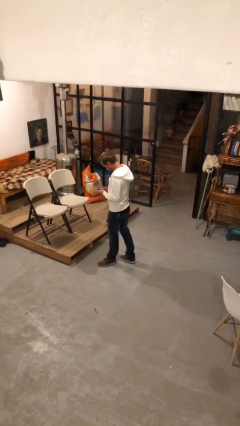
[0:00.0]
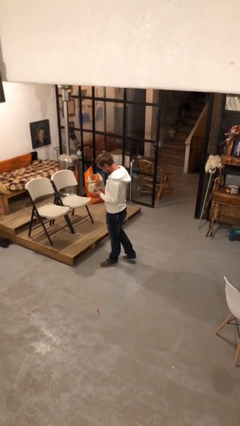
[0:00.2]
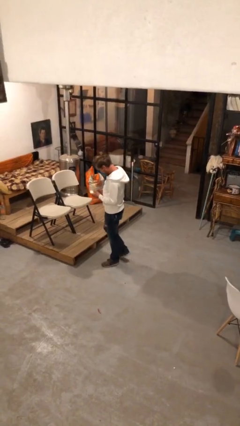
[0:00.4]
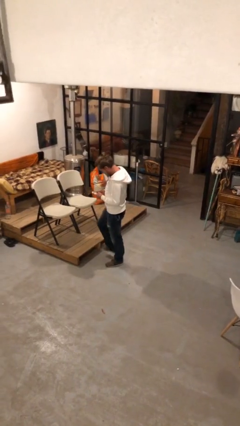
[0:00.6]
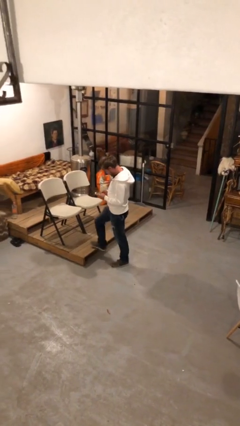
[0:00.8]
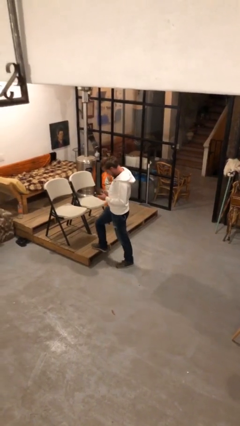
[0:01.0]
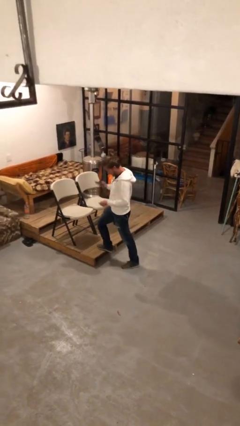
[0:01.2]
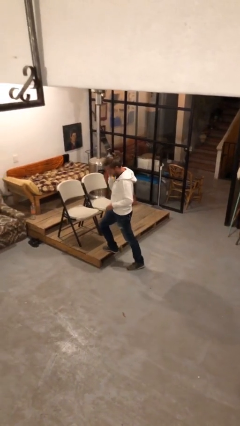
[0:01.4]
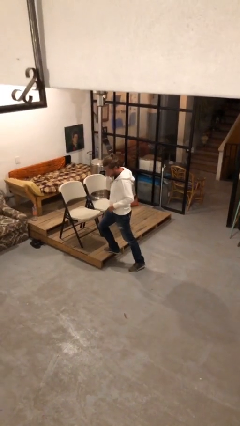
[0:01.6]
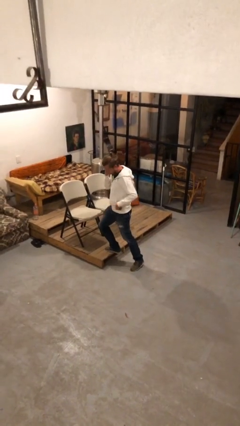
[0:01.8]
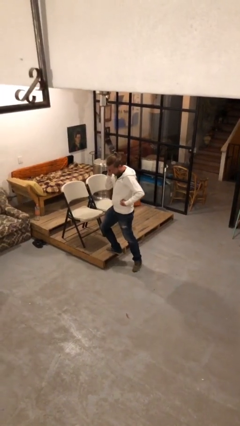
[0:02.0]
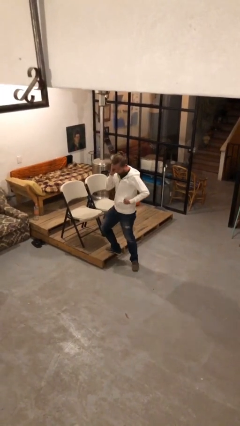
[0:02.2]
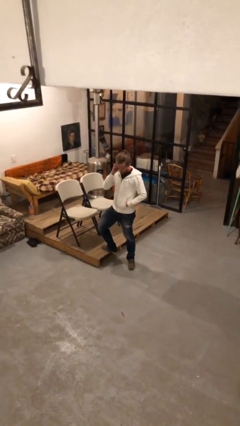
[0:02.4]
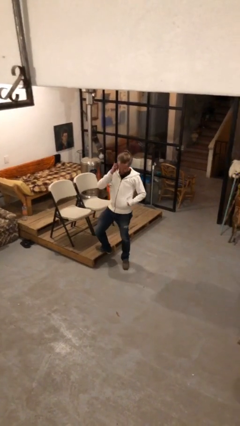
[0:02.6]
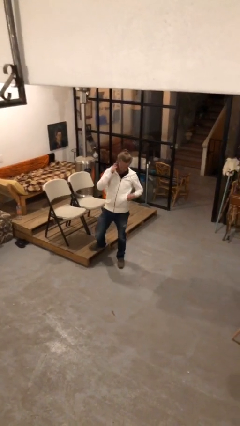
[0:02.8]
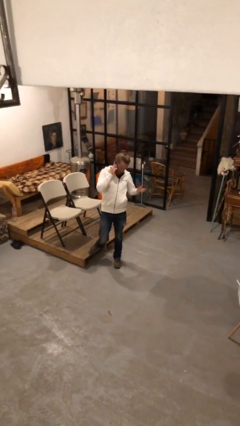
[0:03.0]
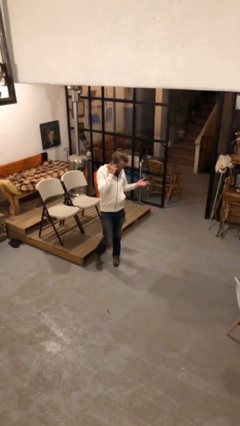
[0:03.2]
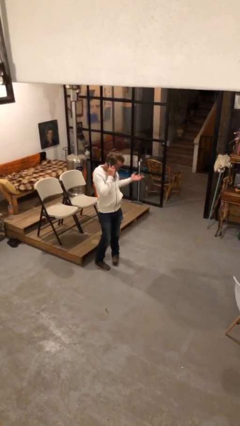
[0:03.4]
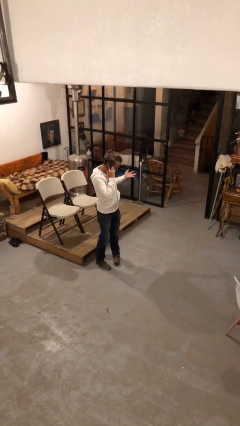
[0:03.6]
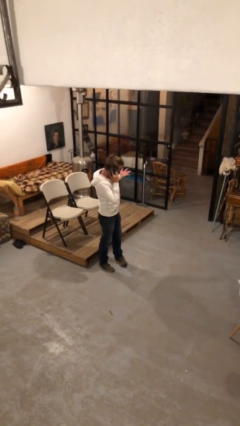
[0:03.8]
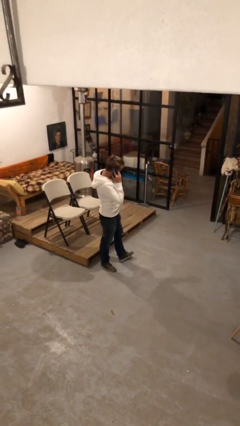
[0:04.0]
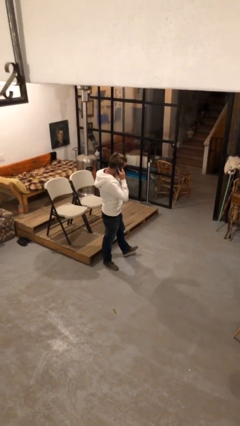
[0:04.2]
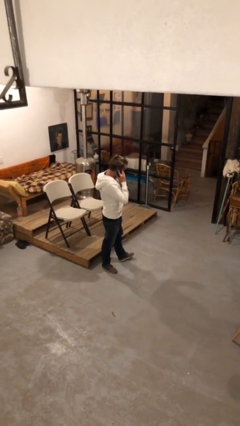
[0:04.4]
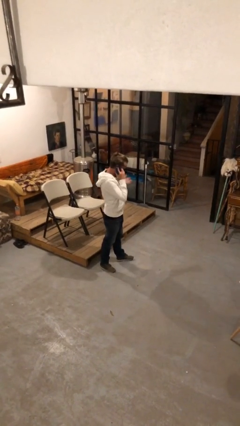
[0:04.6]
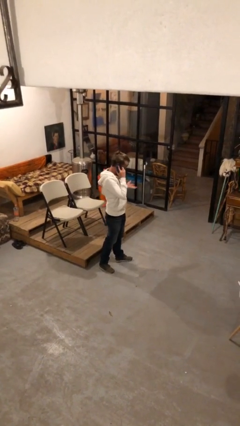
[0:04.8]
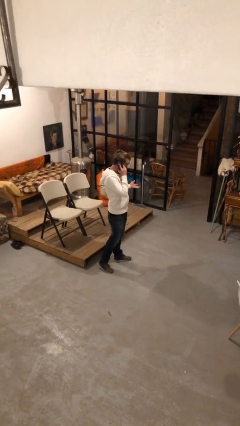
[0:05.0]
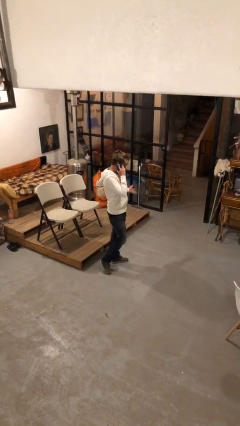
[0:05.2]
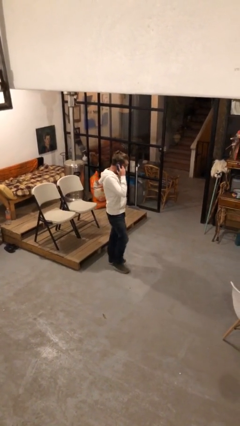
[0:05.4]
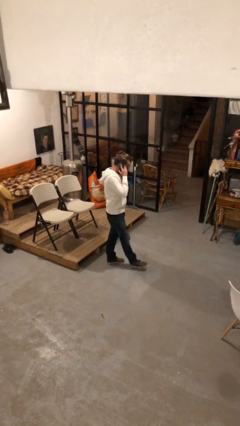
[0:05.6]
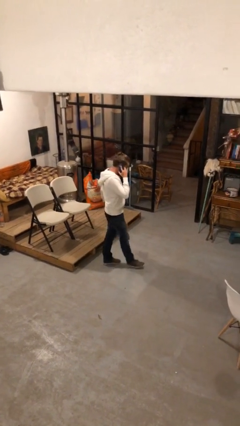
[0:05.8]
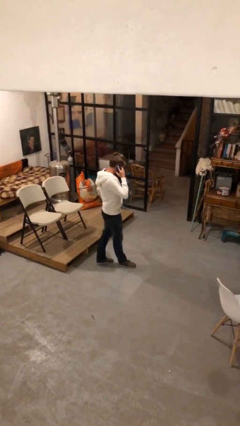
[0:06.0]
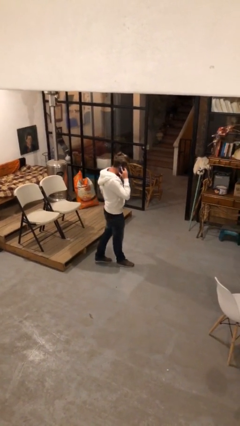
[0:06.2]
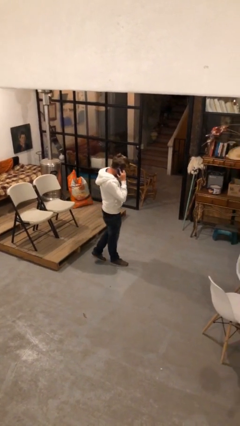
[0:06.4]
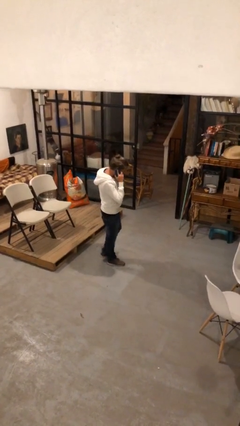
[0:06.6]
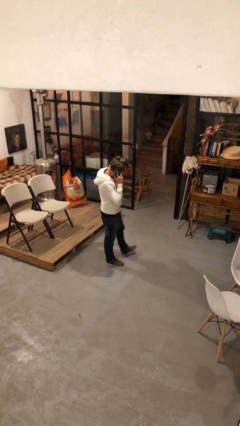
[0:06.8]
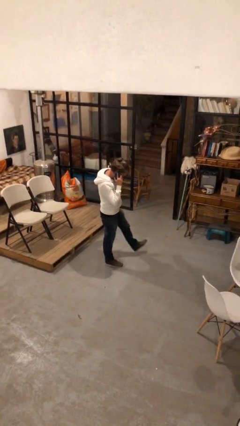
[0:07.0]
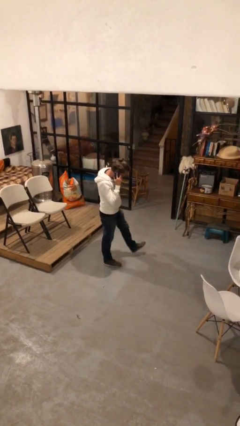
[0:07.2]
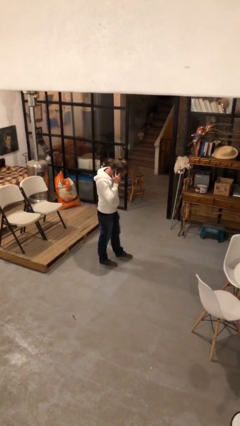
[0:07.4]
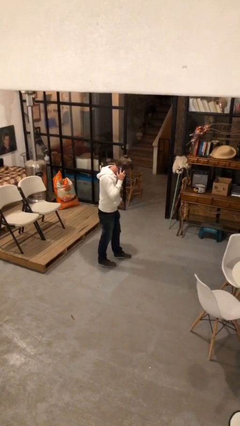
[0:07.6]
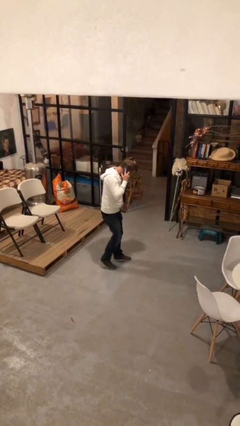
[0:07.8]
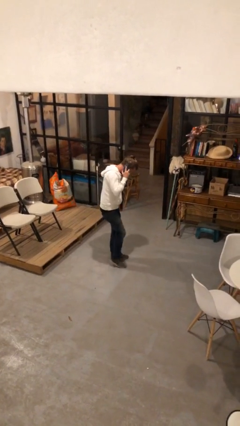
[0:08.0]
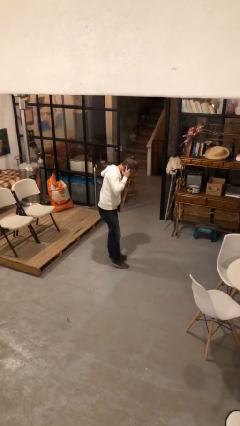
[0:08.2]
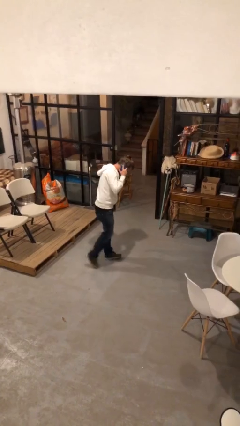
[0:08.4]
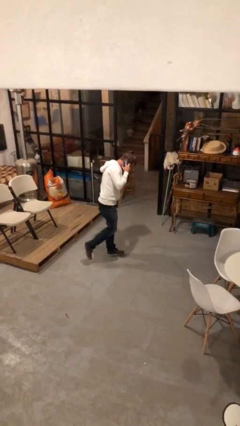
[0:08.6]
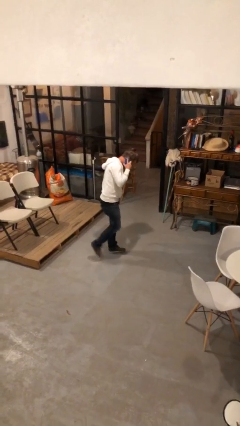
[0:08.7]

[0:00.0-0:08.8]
person talks on phone

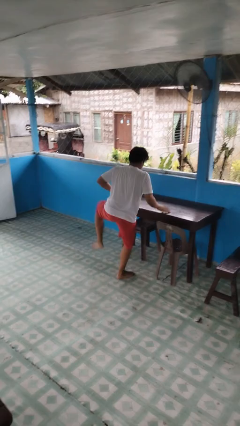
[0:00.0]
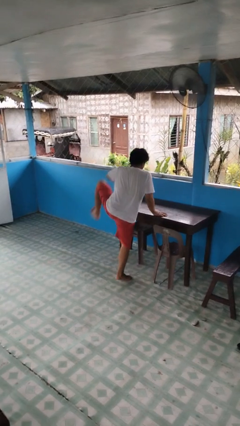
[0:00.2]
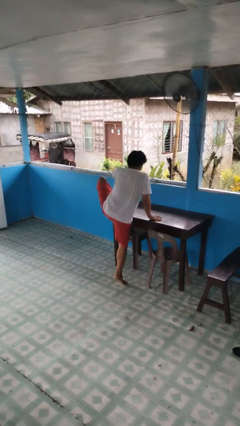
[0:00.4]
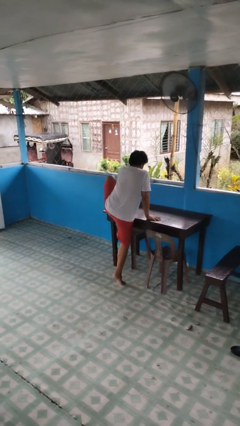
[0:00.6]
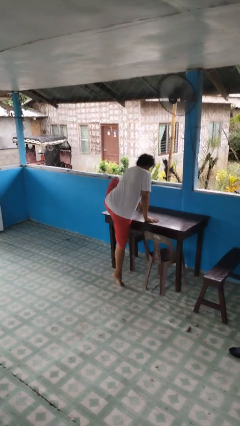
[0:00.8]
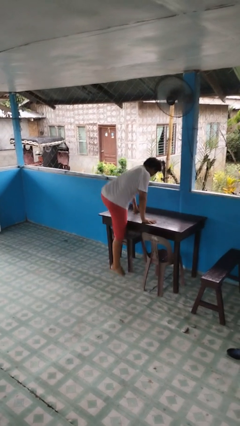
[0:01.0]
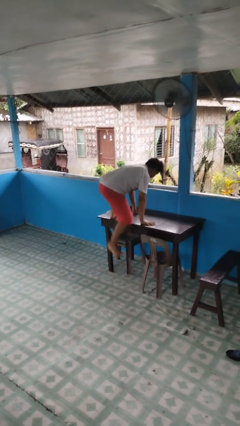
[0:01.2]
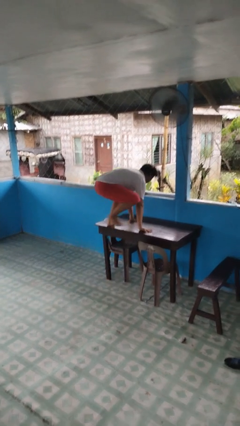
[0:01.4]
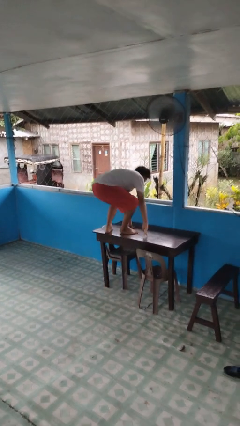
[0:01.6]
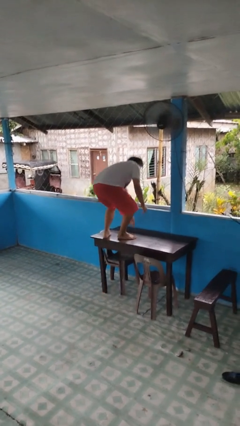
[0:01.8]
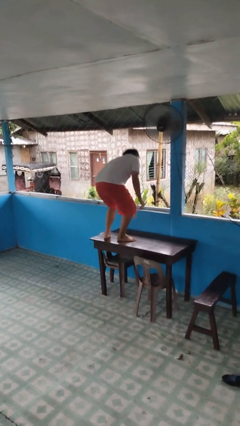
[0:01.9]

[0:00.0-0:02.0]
person climbs on table

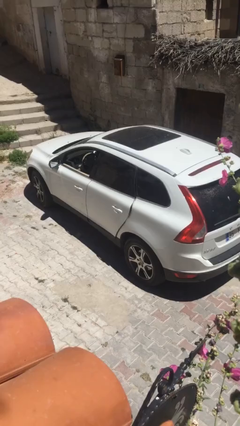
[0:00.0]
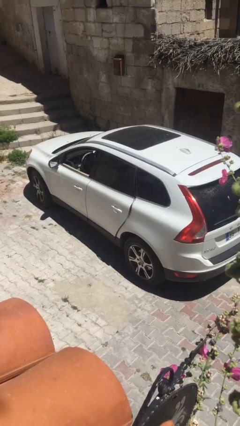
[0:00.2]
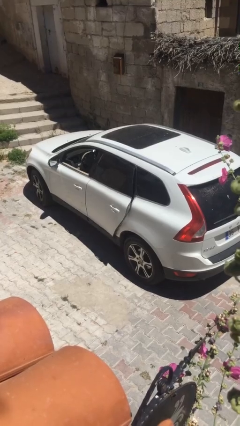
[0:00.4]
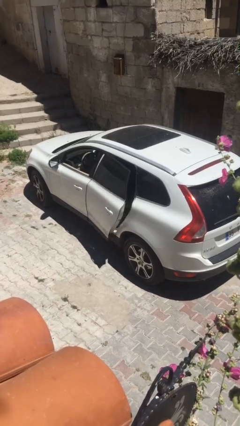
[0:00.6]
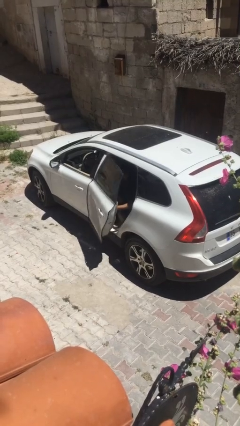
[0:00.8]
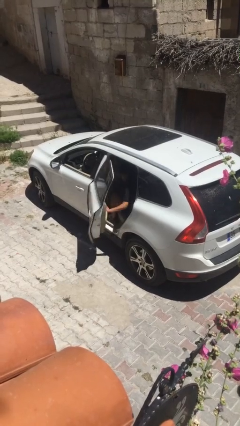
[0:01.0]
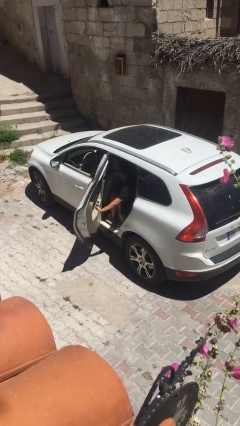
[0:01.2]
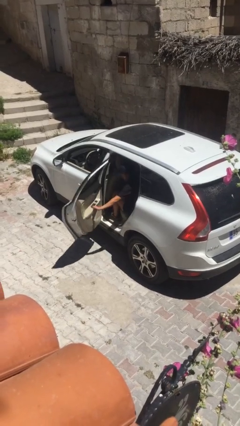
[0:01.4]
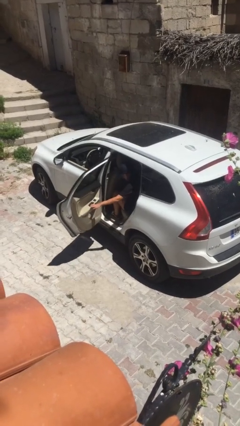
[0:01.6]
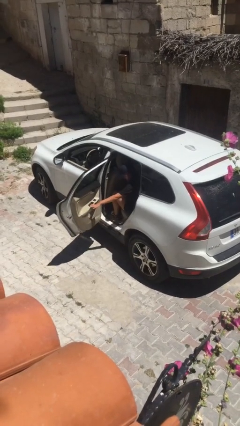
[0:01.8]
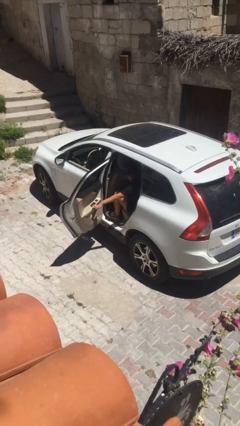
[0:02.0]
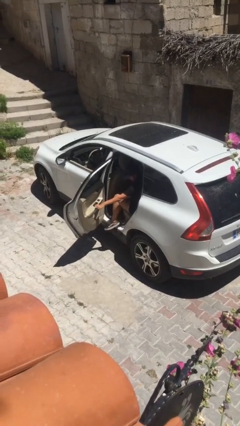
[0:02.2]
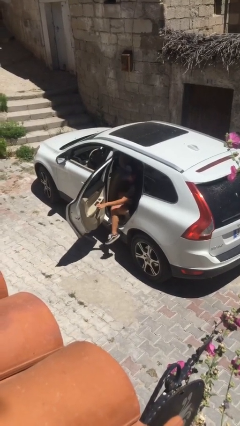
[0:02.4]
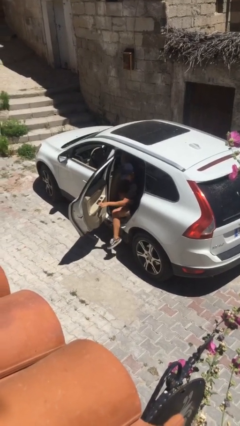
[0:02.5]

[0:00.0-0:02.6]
person opens car door

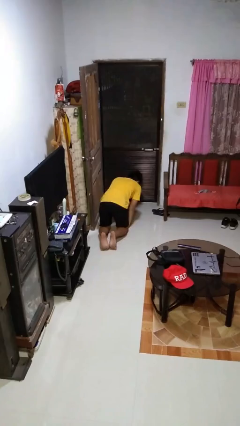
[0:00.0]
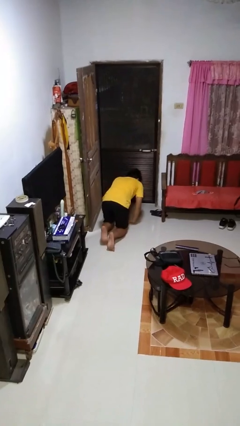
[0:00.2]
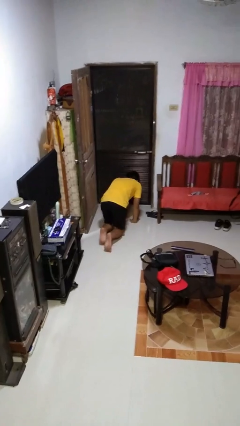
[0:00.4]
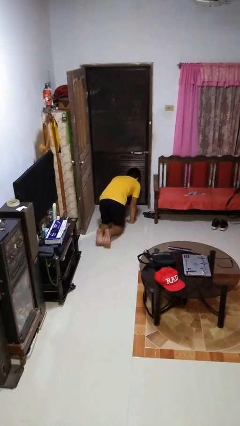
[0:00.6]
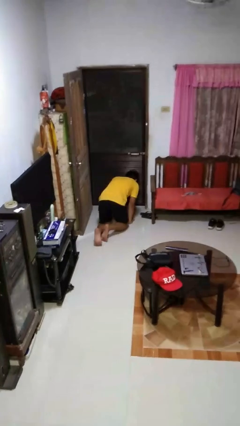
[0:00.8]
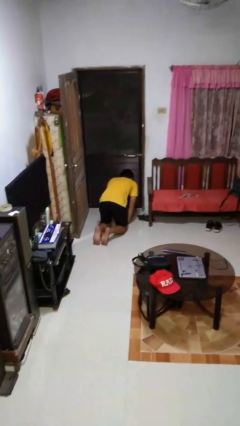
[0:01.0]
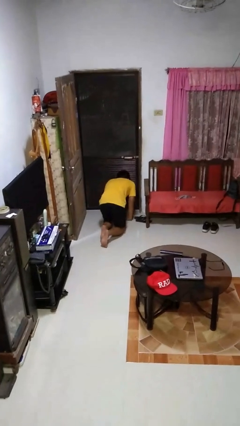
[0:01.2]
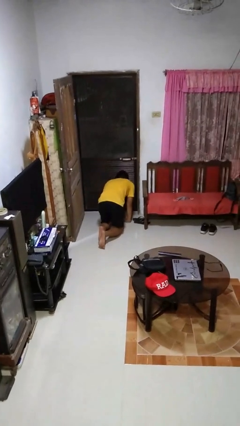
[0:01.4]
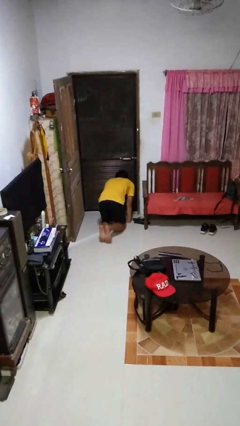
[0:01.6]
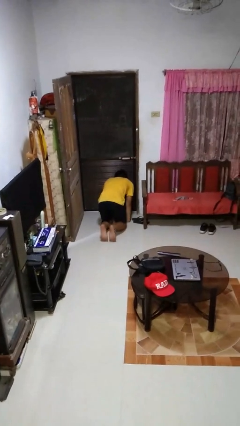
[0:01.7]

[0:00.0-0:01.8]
person crawls

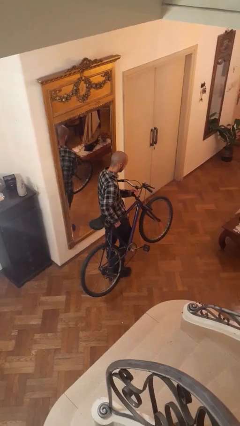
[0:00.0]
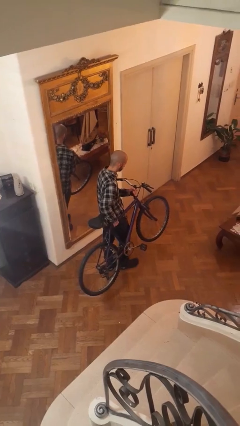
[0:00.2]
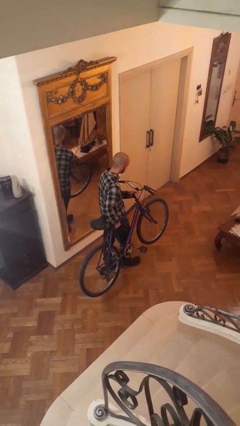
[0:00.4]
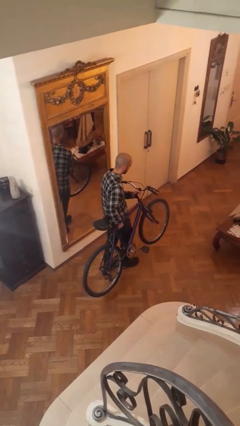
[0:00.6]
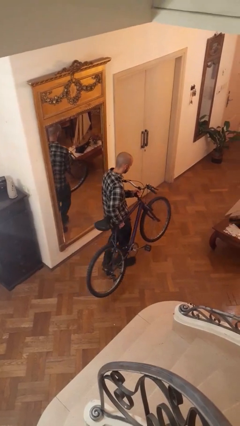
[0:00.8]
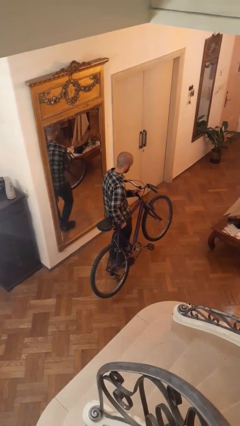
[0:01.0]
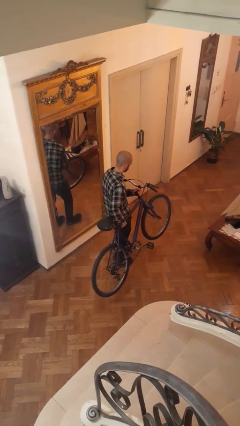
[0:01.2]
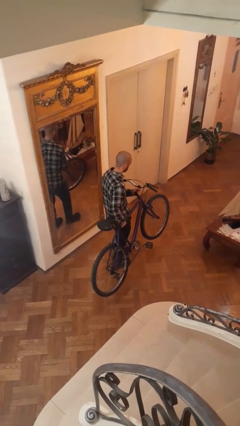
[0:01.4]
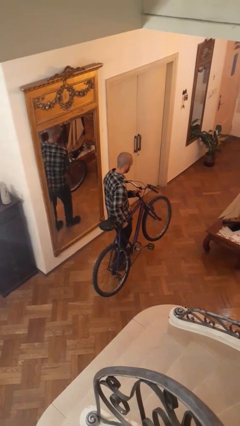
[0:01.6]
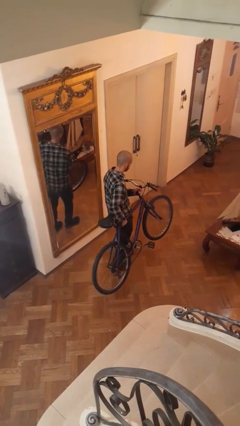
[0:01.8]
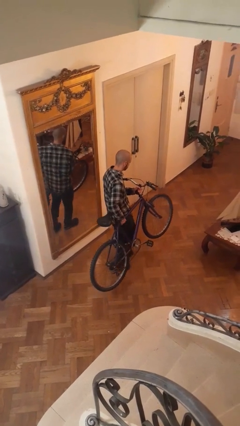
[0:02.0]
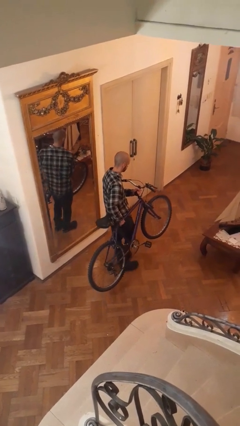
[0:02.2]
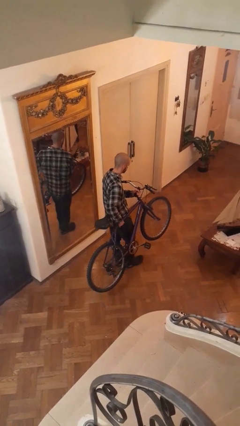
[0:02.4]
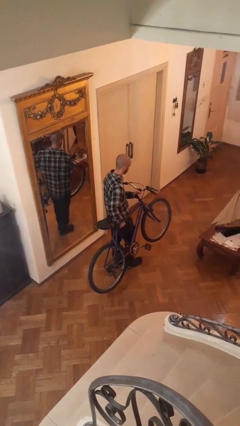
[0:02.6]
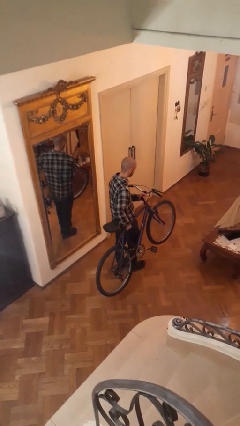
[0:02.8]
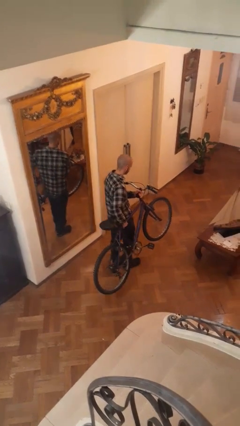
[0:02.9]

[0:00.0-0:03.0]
person carries bicycle
